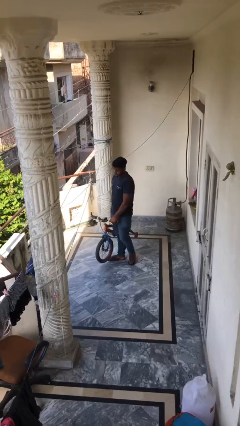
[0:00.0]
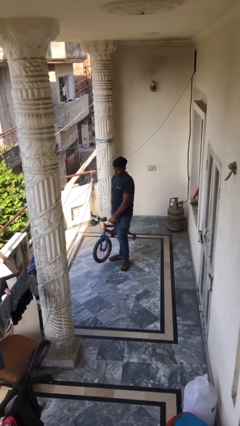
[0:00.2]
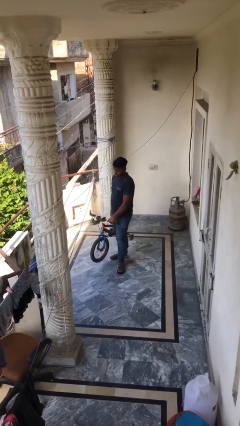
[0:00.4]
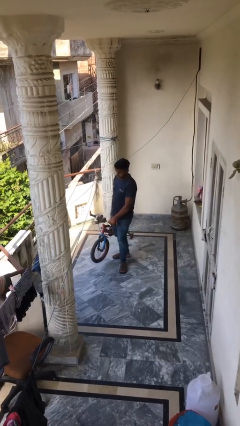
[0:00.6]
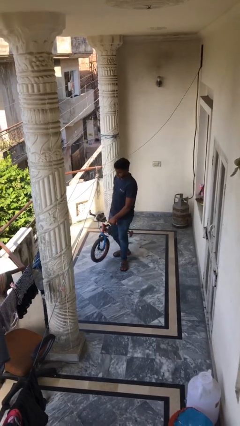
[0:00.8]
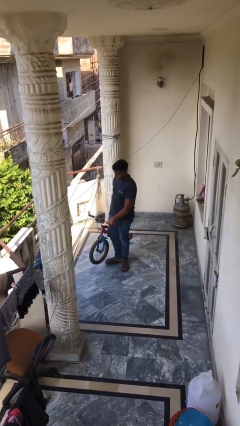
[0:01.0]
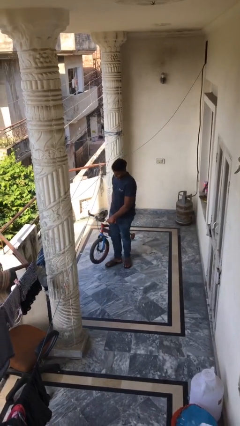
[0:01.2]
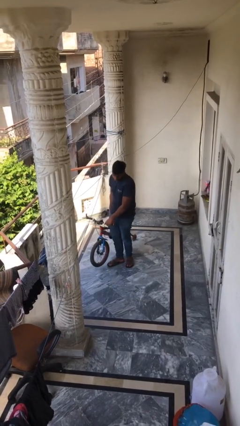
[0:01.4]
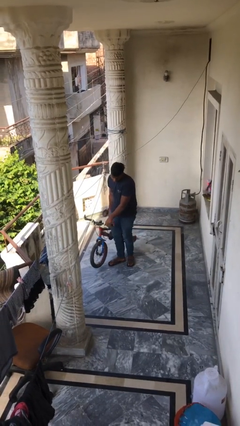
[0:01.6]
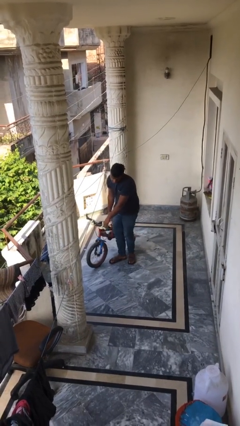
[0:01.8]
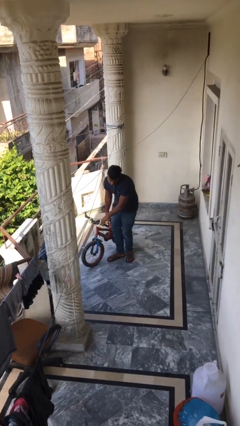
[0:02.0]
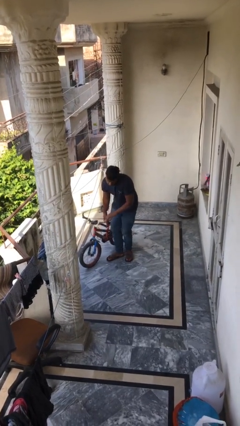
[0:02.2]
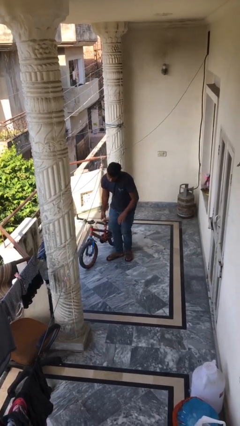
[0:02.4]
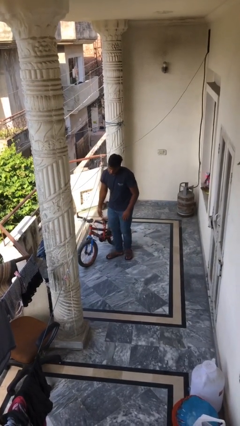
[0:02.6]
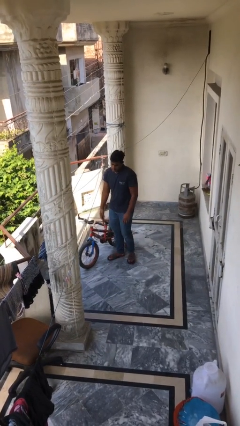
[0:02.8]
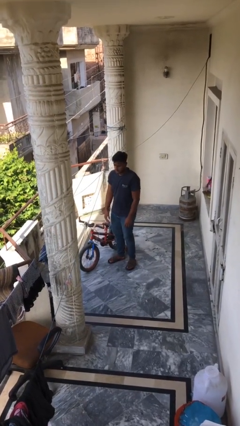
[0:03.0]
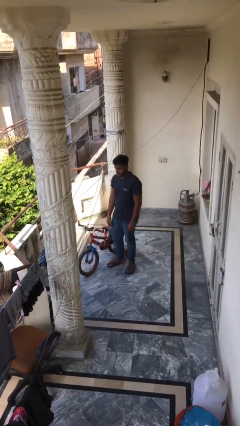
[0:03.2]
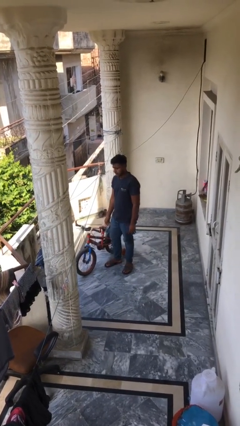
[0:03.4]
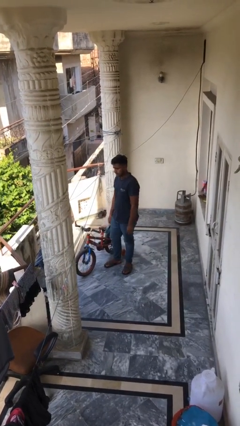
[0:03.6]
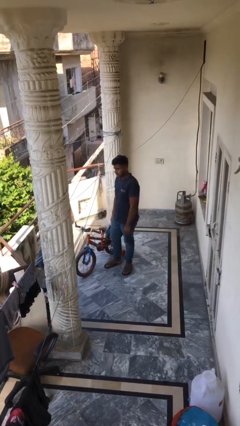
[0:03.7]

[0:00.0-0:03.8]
person puts down object on floor

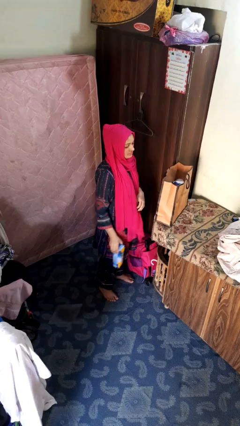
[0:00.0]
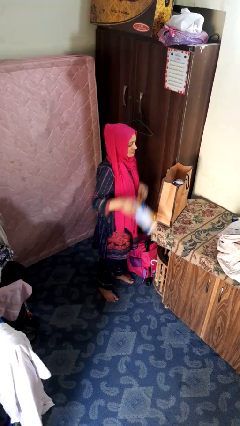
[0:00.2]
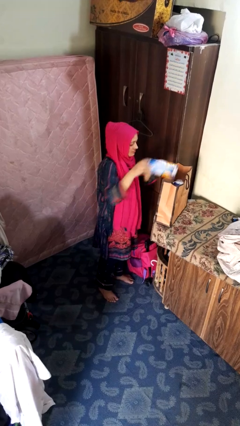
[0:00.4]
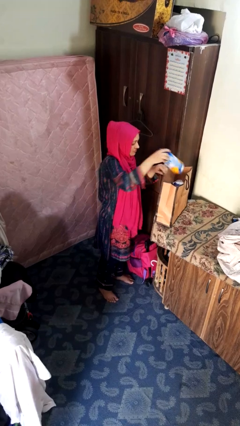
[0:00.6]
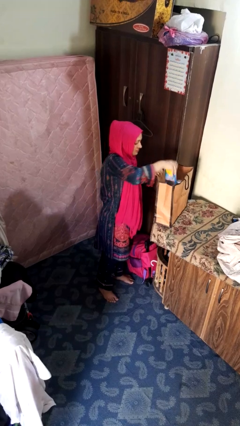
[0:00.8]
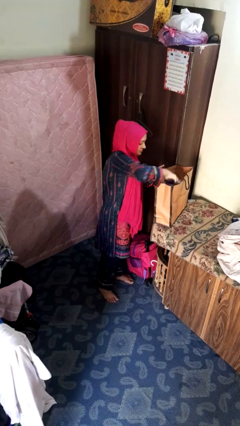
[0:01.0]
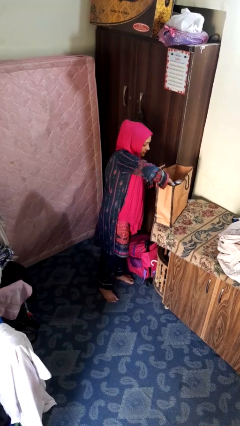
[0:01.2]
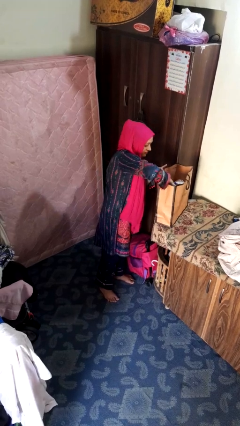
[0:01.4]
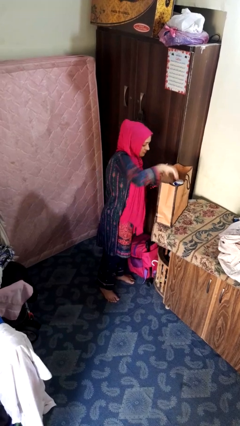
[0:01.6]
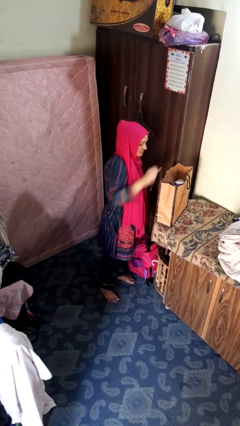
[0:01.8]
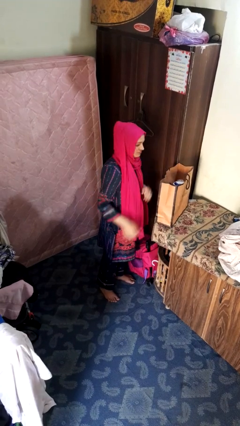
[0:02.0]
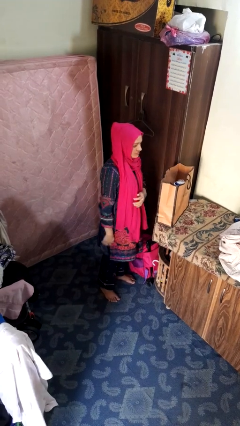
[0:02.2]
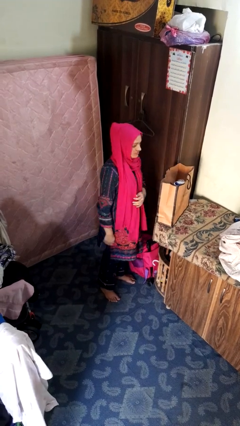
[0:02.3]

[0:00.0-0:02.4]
person puts object into bag

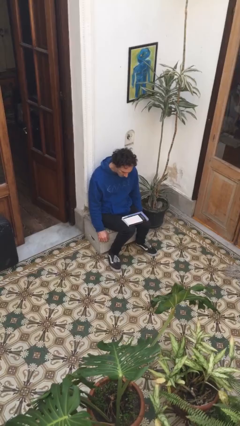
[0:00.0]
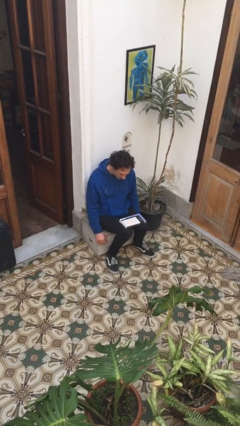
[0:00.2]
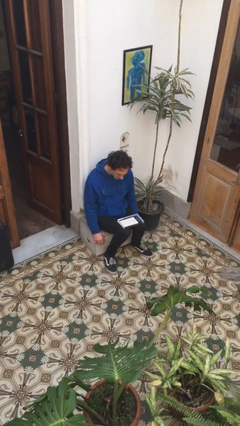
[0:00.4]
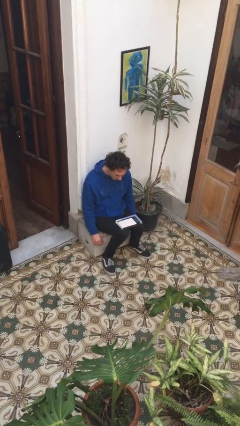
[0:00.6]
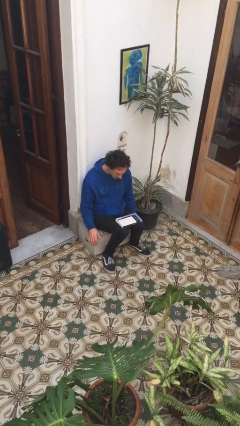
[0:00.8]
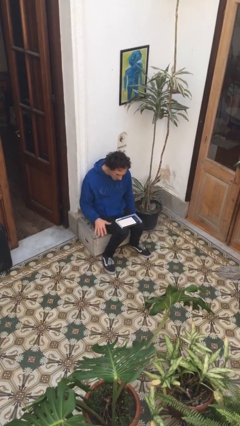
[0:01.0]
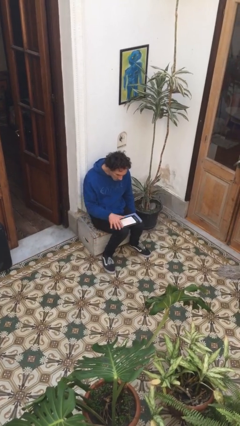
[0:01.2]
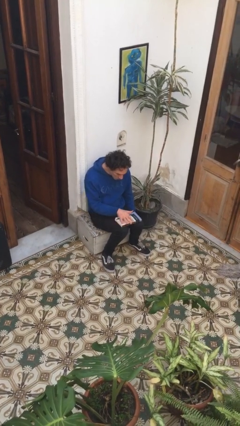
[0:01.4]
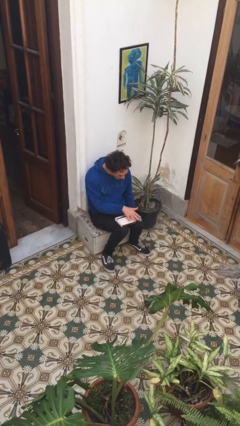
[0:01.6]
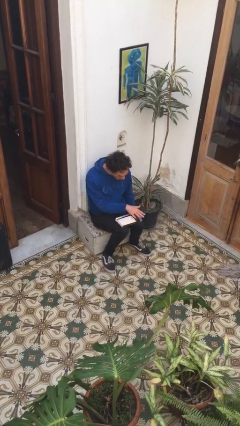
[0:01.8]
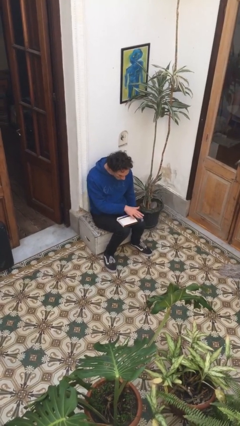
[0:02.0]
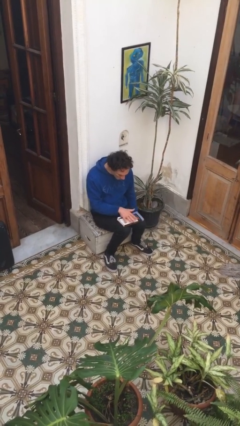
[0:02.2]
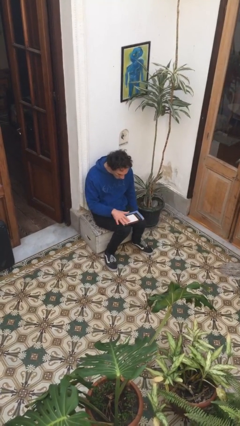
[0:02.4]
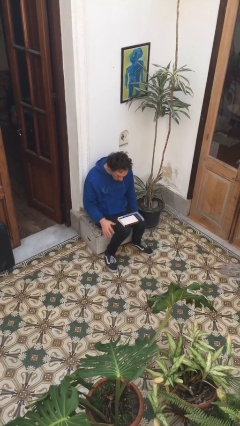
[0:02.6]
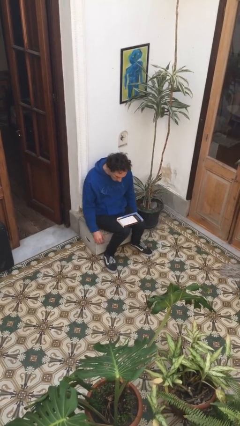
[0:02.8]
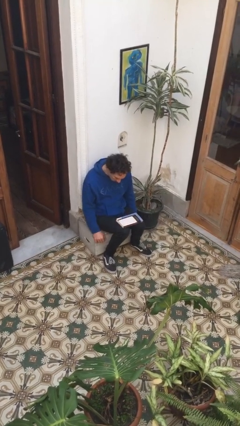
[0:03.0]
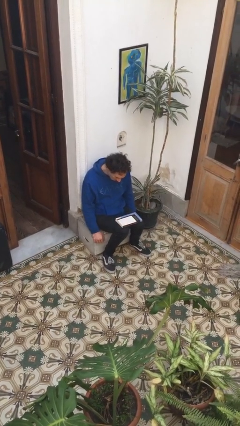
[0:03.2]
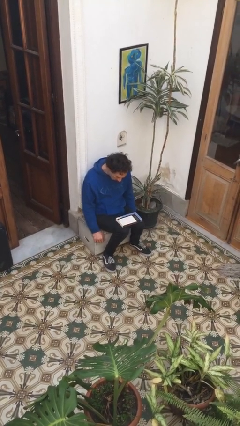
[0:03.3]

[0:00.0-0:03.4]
person waves hand over object

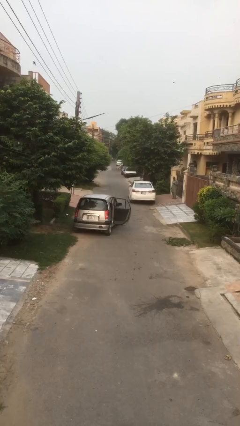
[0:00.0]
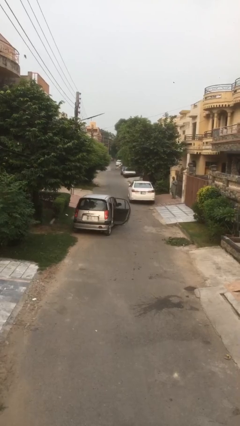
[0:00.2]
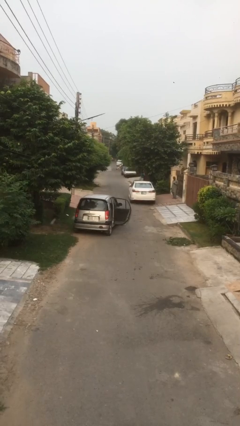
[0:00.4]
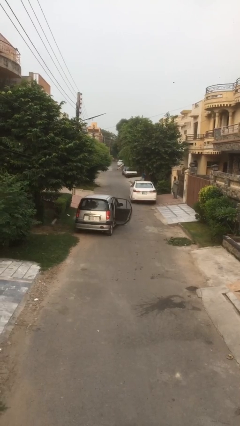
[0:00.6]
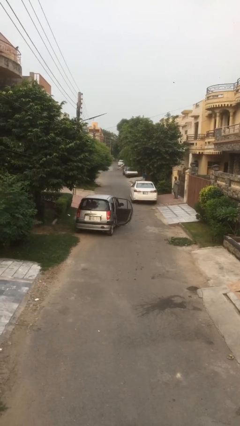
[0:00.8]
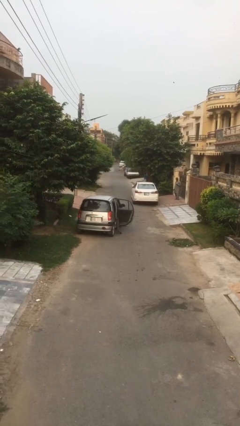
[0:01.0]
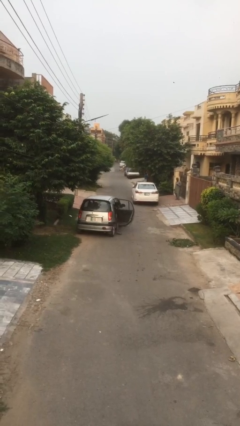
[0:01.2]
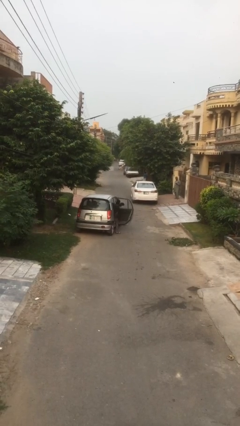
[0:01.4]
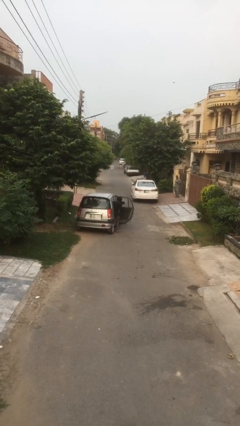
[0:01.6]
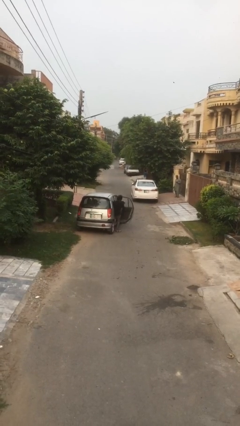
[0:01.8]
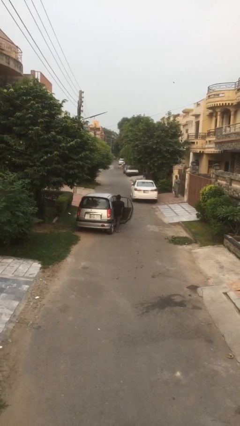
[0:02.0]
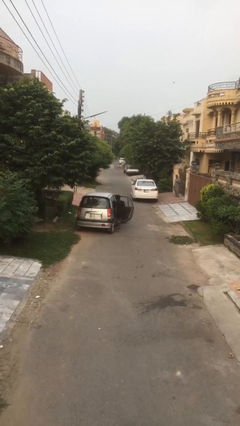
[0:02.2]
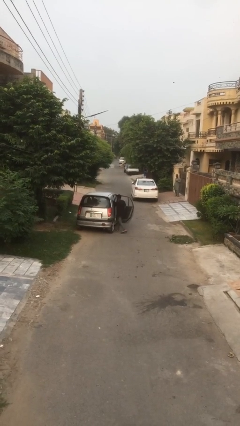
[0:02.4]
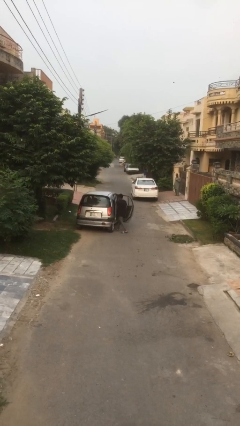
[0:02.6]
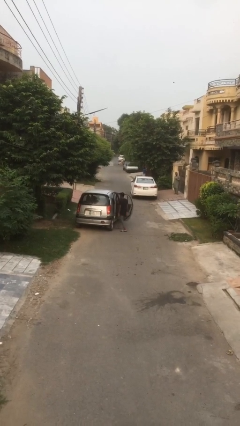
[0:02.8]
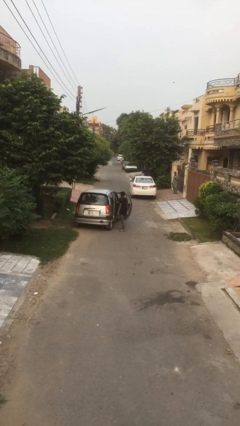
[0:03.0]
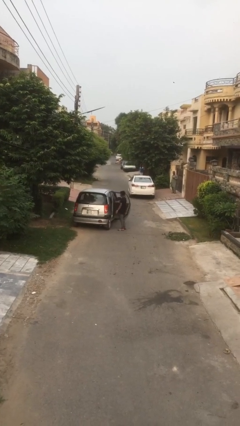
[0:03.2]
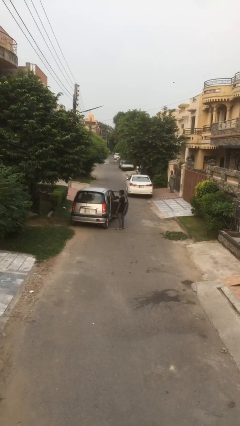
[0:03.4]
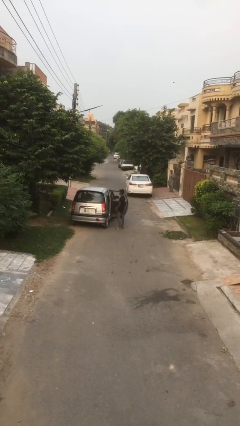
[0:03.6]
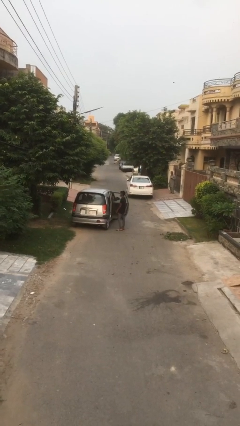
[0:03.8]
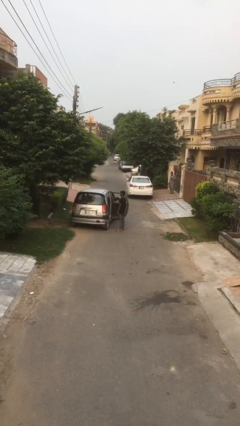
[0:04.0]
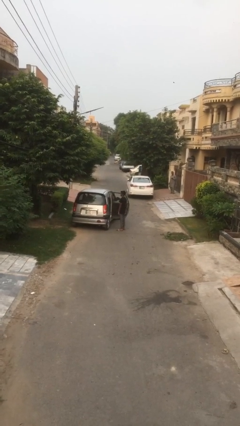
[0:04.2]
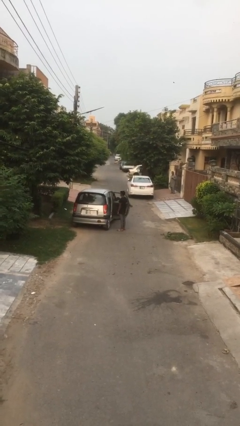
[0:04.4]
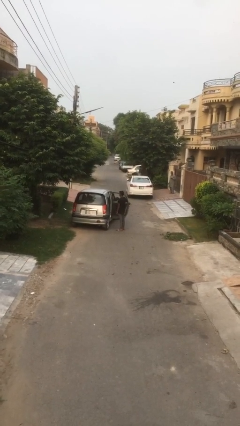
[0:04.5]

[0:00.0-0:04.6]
person exits car

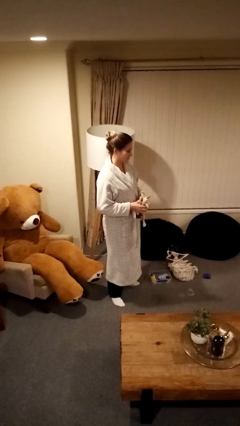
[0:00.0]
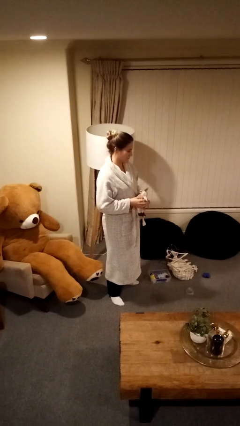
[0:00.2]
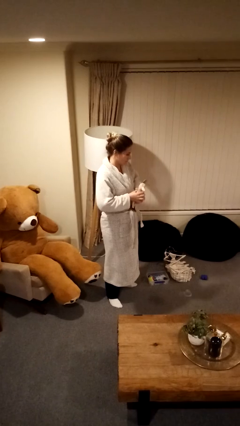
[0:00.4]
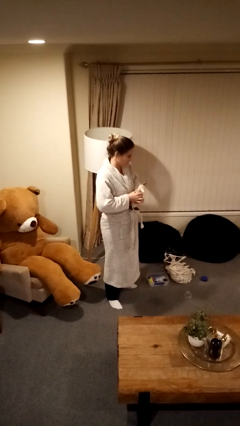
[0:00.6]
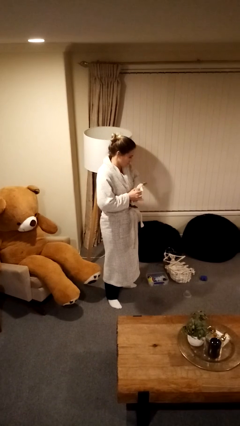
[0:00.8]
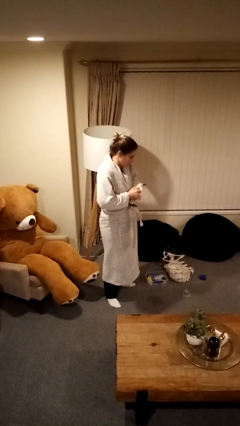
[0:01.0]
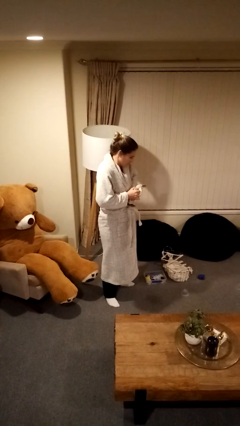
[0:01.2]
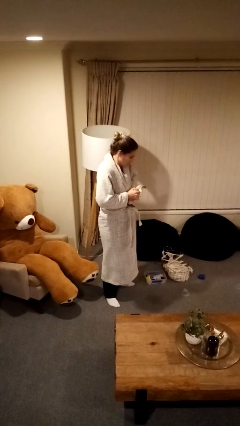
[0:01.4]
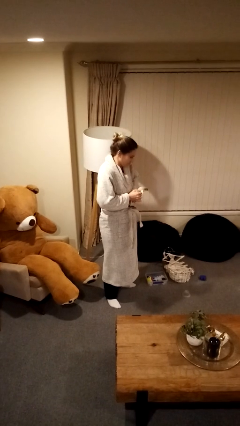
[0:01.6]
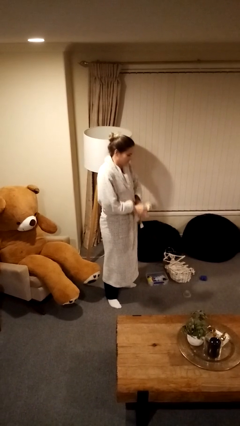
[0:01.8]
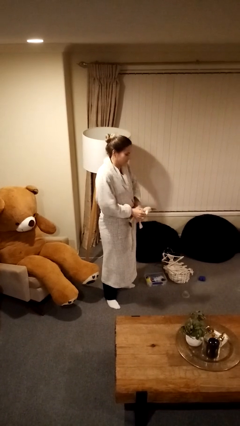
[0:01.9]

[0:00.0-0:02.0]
person squeezes object

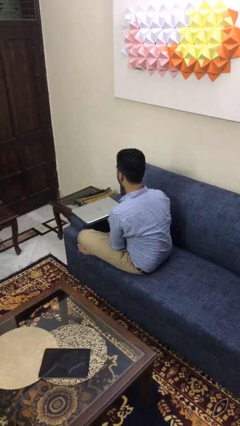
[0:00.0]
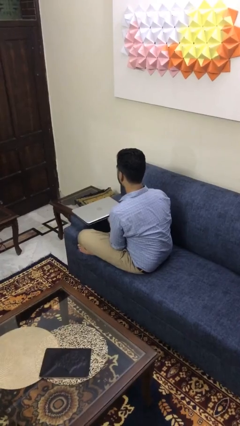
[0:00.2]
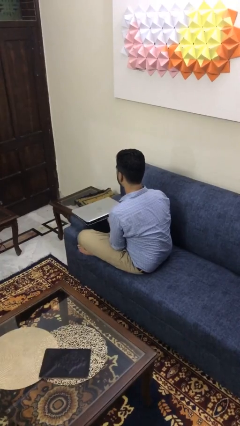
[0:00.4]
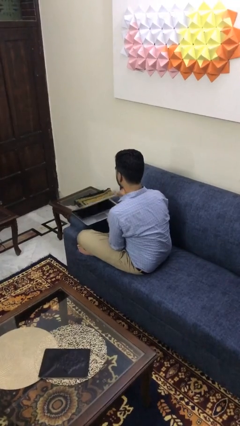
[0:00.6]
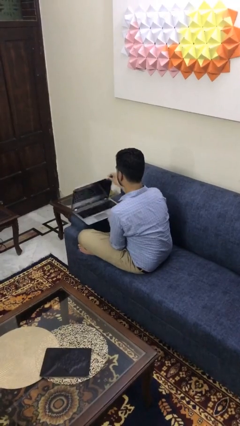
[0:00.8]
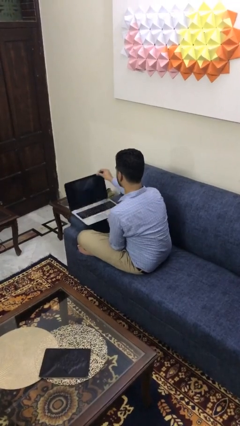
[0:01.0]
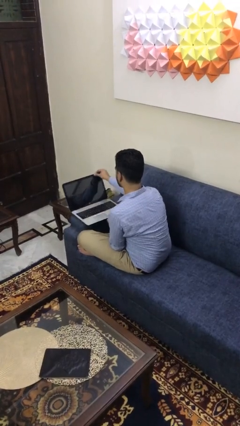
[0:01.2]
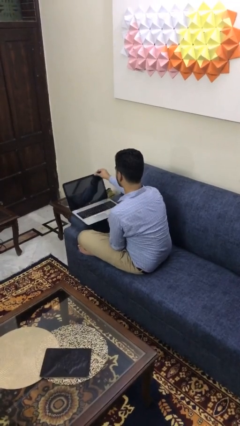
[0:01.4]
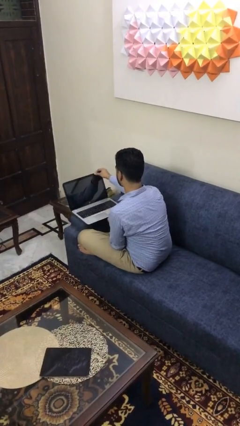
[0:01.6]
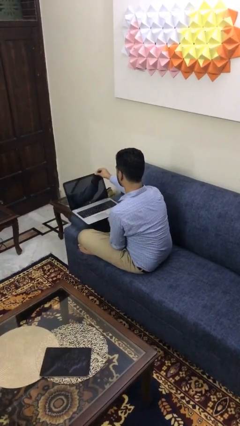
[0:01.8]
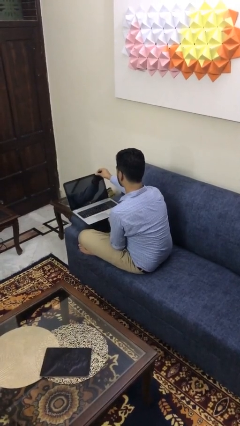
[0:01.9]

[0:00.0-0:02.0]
person opens laptop
